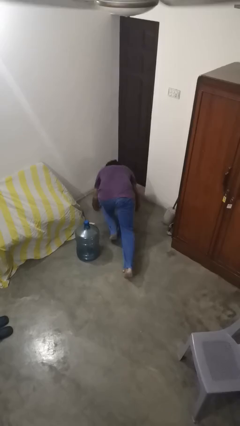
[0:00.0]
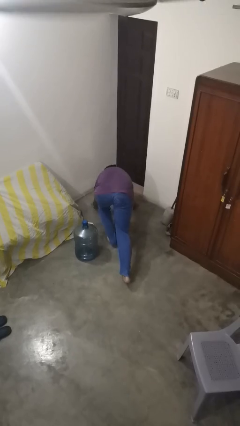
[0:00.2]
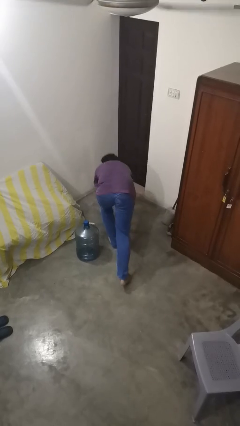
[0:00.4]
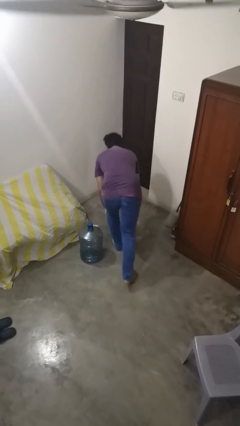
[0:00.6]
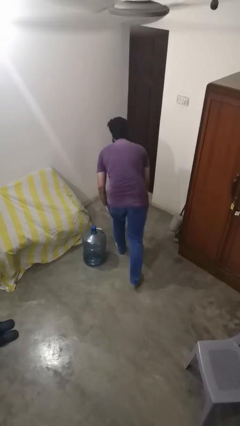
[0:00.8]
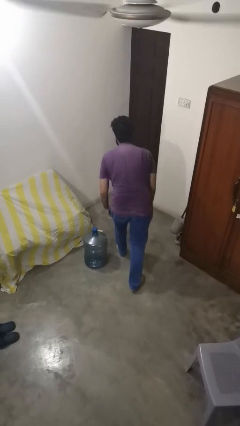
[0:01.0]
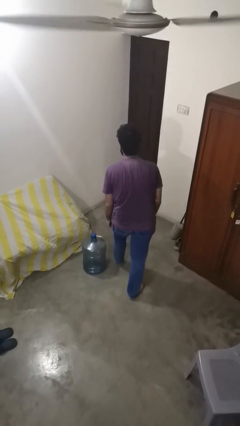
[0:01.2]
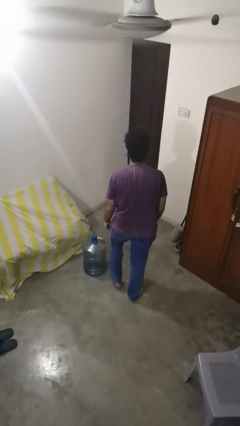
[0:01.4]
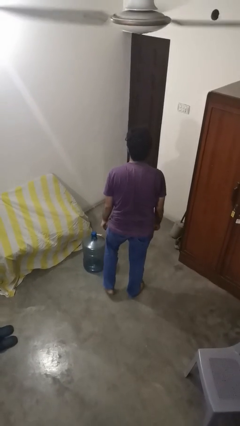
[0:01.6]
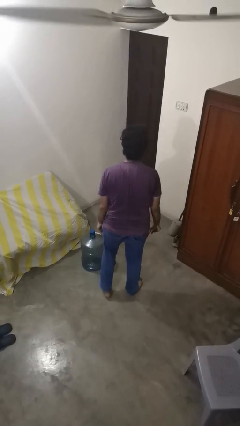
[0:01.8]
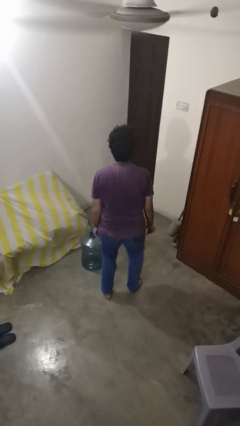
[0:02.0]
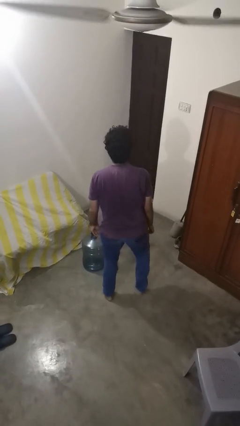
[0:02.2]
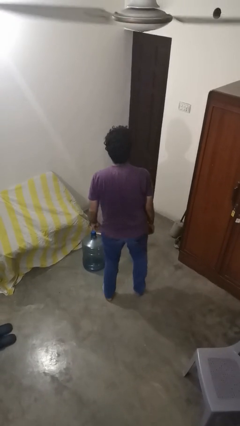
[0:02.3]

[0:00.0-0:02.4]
person stands up from floor

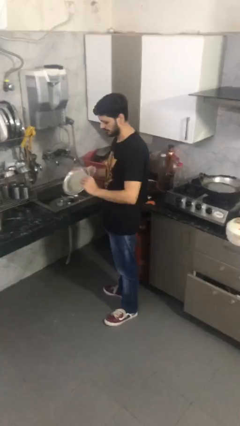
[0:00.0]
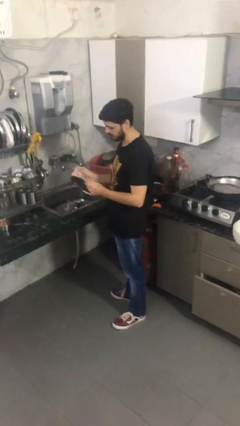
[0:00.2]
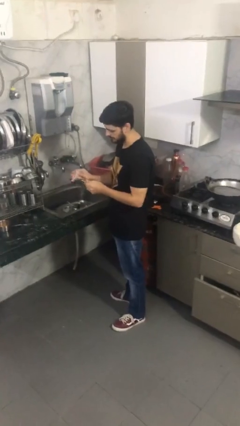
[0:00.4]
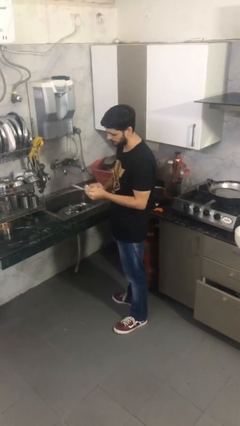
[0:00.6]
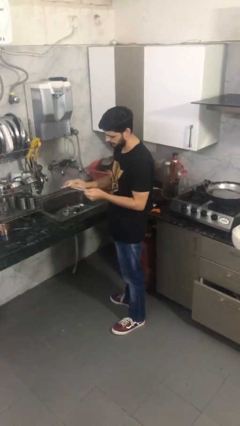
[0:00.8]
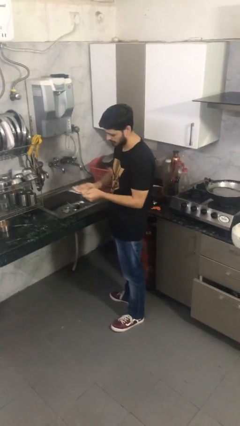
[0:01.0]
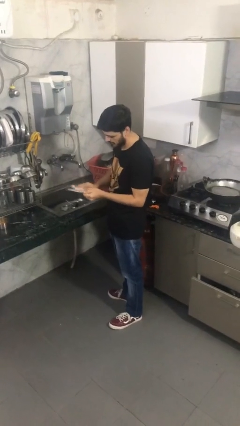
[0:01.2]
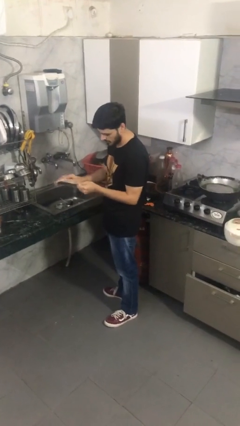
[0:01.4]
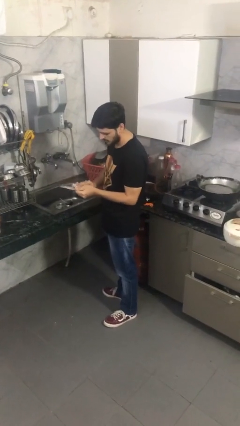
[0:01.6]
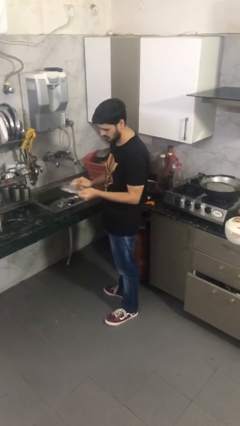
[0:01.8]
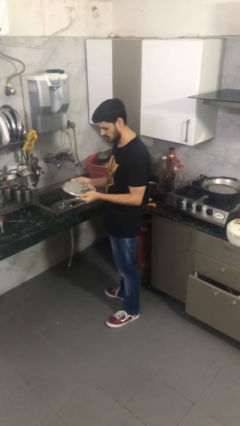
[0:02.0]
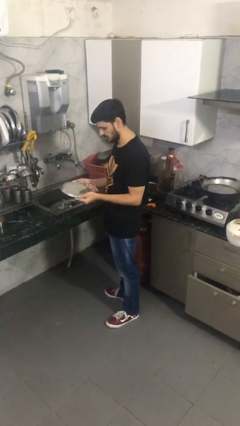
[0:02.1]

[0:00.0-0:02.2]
person dries dish

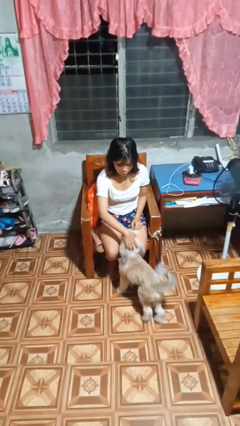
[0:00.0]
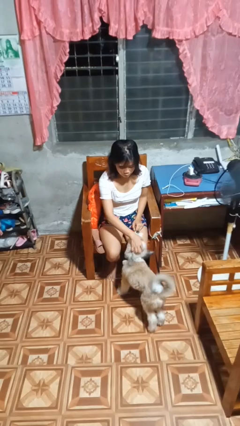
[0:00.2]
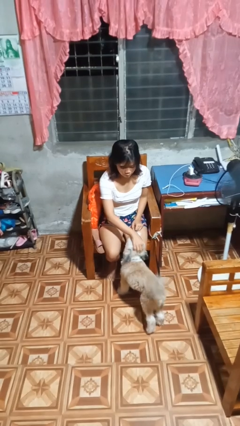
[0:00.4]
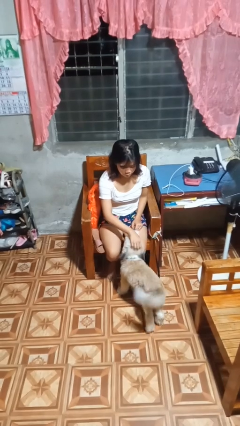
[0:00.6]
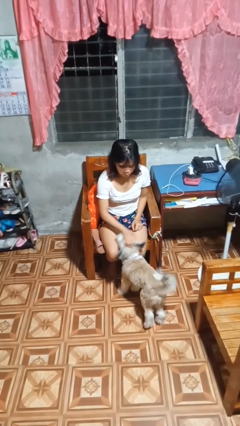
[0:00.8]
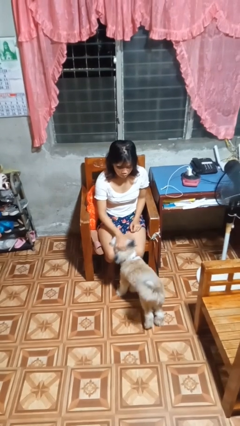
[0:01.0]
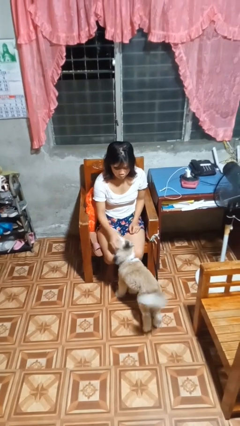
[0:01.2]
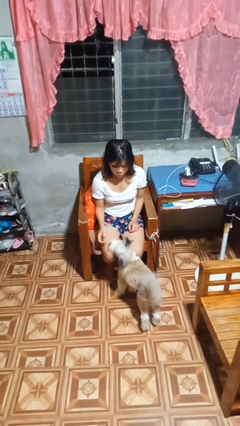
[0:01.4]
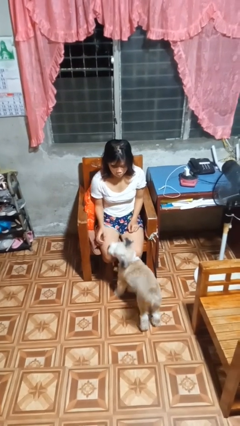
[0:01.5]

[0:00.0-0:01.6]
person pets dog

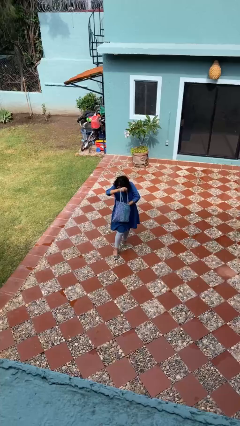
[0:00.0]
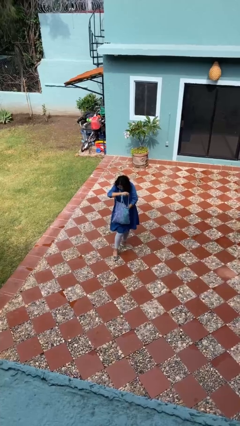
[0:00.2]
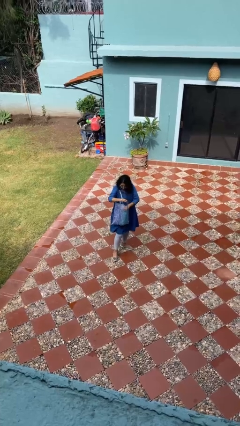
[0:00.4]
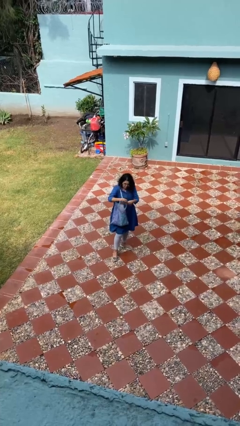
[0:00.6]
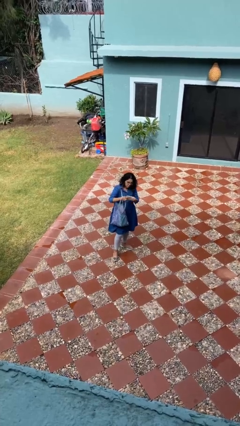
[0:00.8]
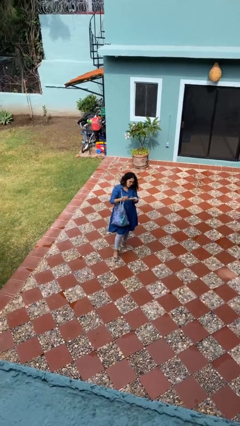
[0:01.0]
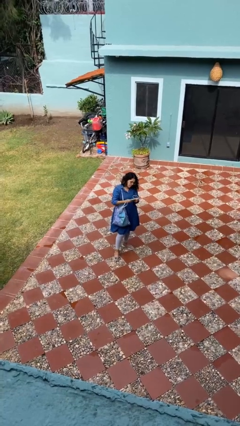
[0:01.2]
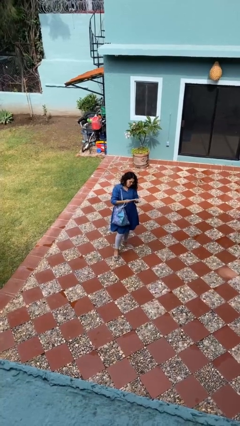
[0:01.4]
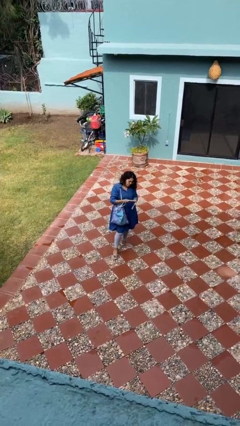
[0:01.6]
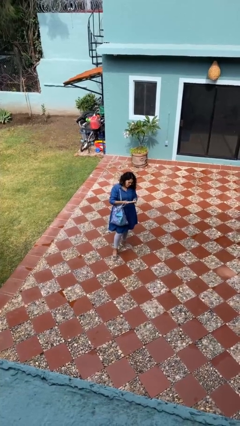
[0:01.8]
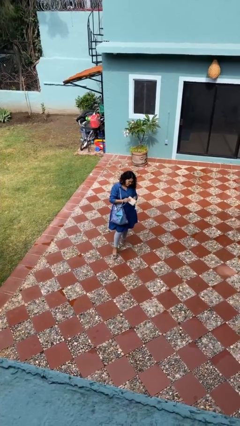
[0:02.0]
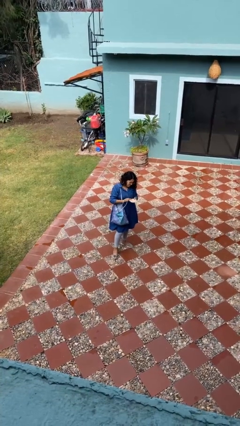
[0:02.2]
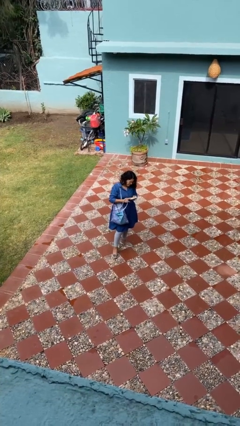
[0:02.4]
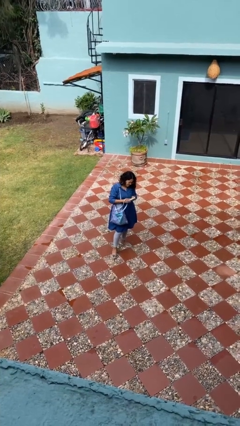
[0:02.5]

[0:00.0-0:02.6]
person takes object from purse

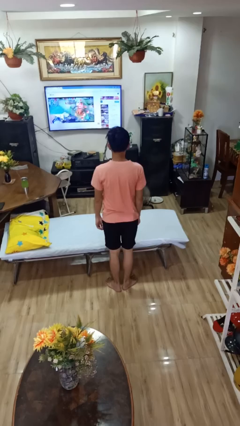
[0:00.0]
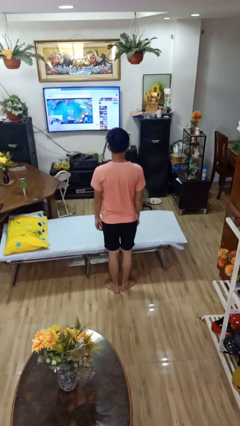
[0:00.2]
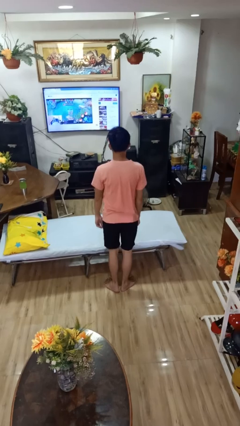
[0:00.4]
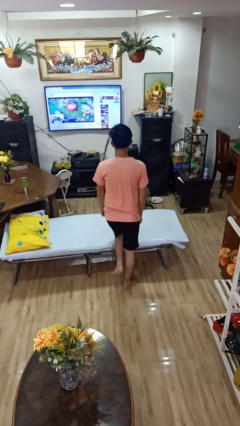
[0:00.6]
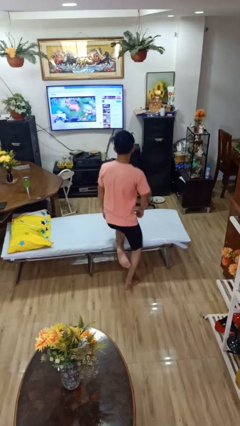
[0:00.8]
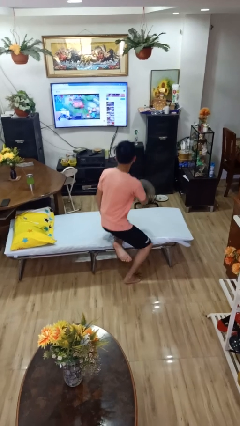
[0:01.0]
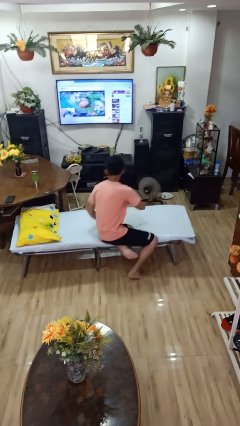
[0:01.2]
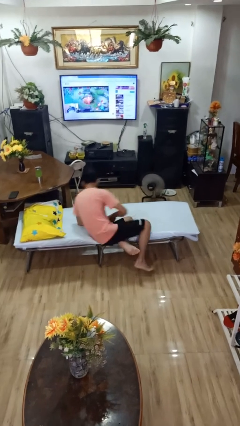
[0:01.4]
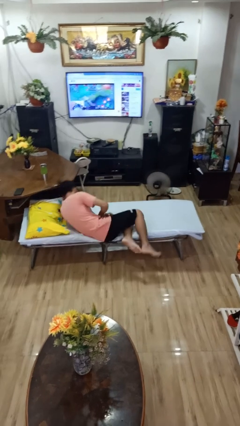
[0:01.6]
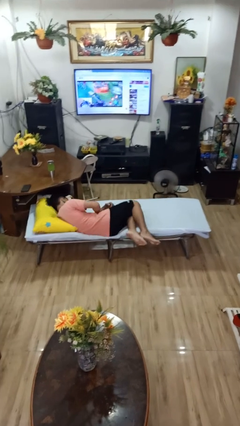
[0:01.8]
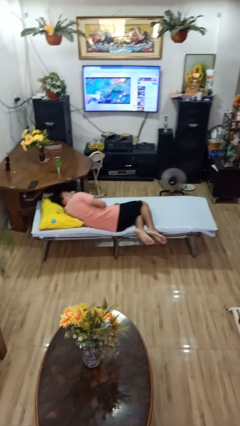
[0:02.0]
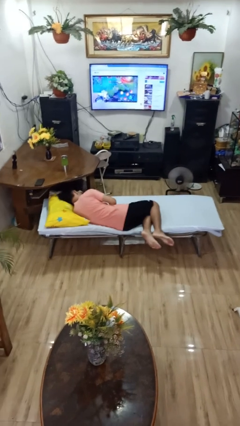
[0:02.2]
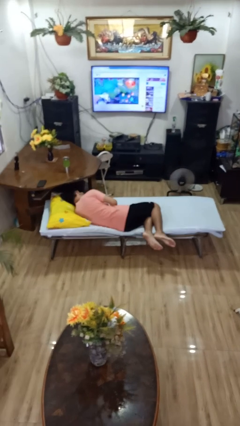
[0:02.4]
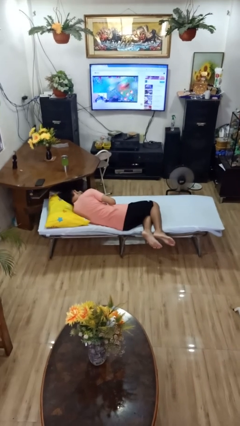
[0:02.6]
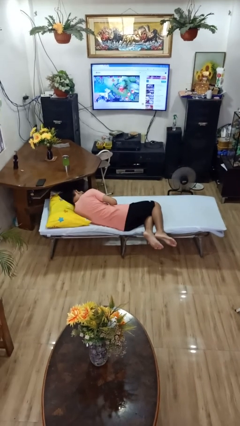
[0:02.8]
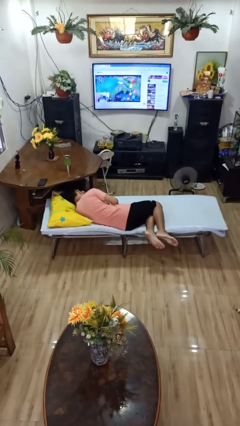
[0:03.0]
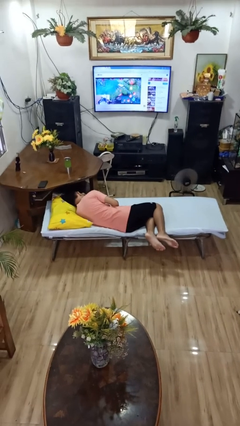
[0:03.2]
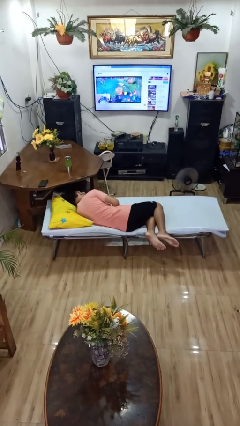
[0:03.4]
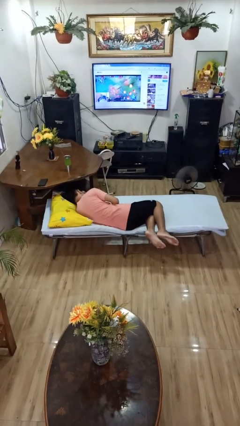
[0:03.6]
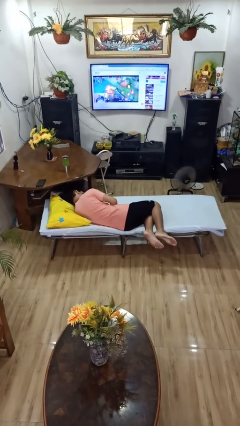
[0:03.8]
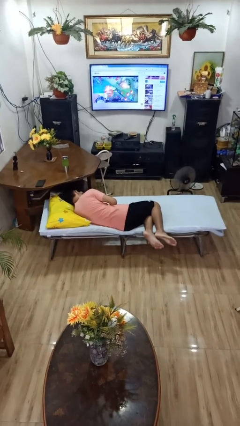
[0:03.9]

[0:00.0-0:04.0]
person lies down on bed

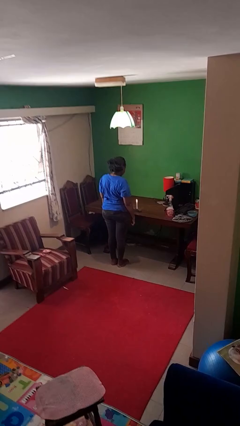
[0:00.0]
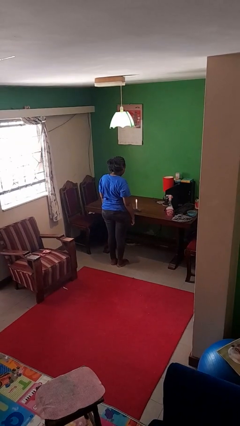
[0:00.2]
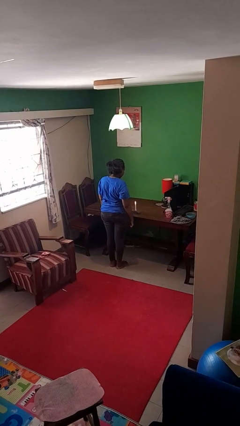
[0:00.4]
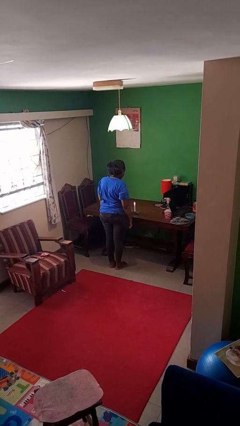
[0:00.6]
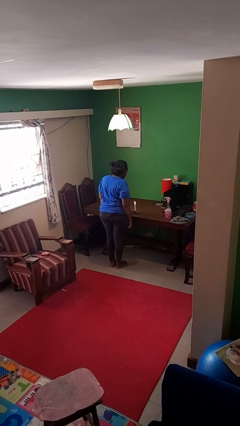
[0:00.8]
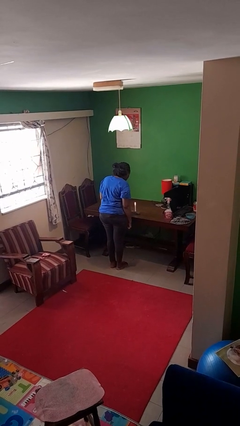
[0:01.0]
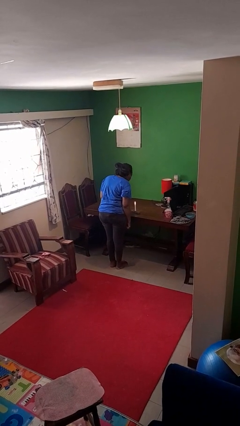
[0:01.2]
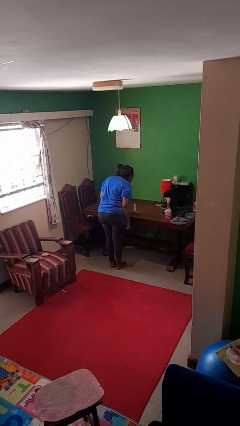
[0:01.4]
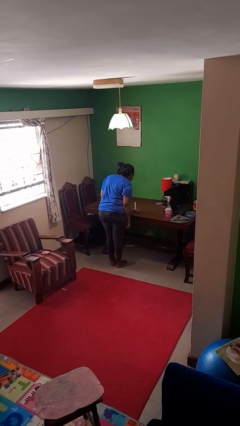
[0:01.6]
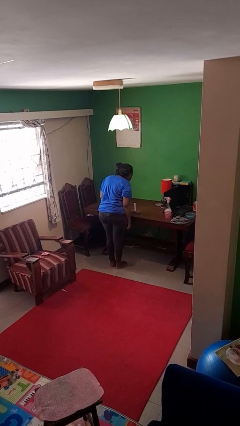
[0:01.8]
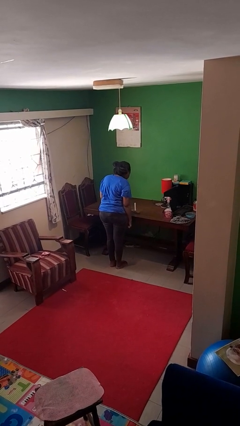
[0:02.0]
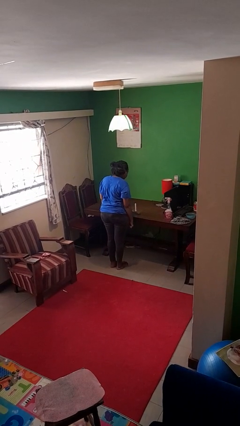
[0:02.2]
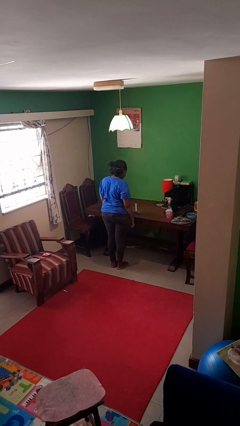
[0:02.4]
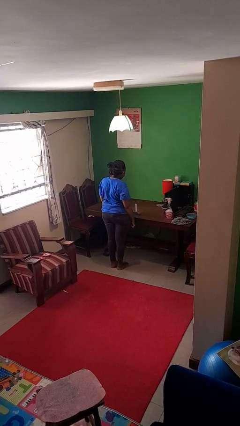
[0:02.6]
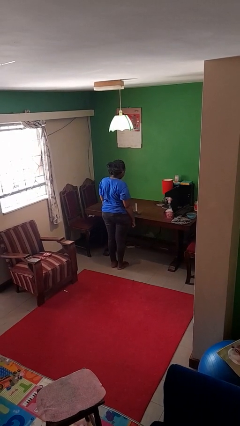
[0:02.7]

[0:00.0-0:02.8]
person extinguishes candle

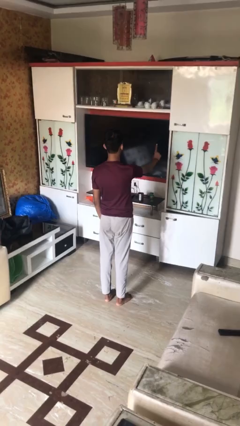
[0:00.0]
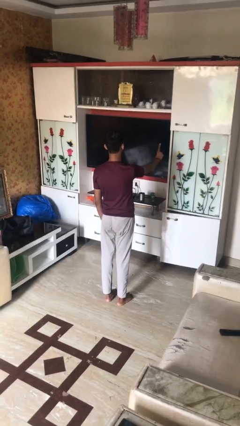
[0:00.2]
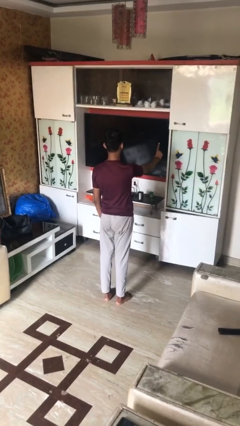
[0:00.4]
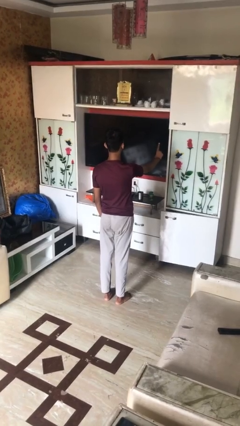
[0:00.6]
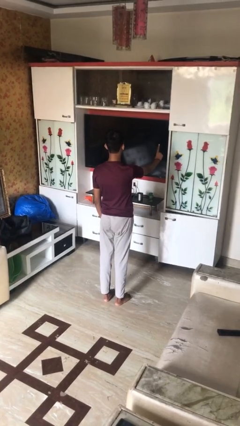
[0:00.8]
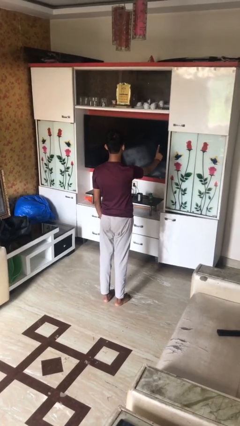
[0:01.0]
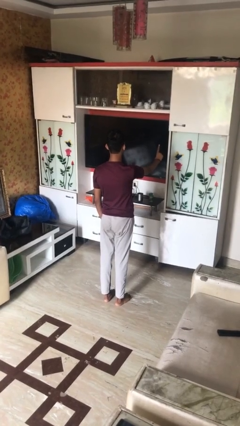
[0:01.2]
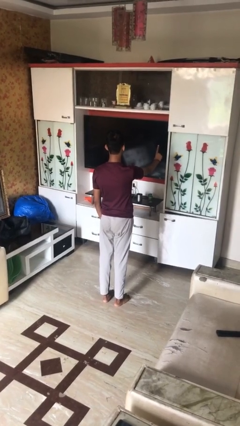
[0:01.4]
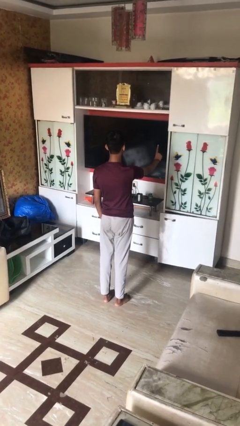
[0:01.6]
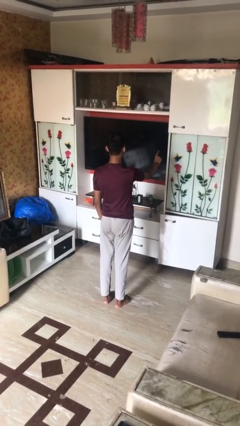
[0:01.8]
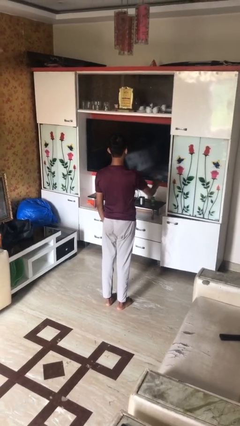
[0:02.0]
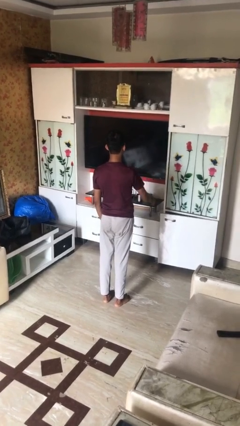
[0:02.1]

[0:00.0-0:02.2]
person gestures number one
